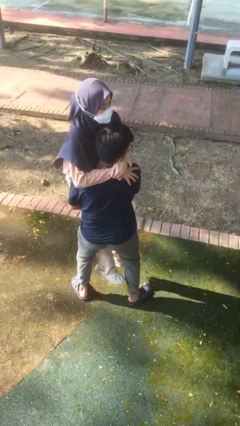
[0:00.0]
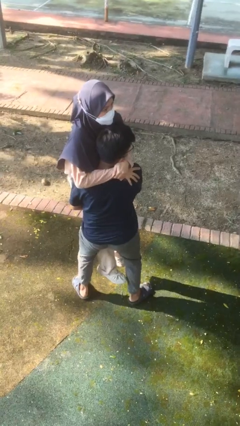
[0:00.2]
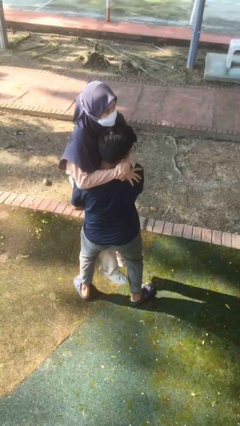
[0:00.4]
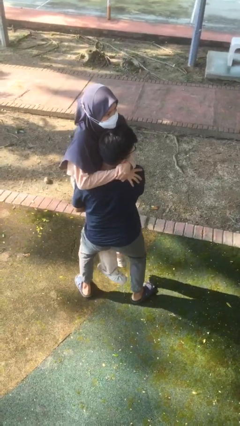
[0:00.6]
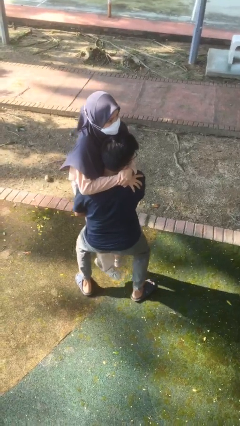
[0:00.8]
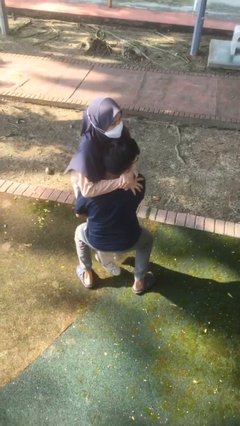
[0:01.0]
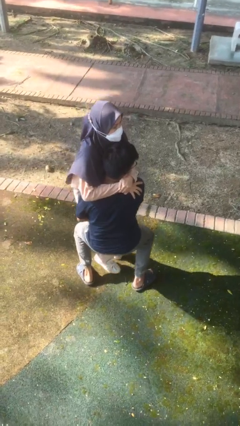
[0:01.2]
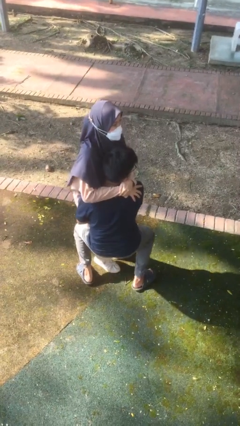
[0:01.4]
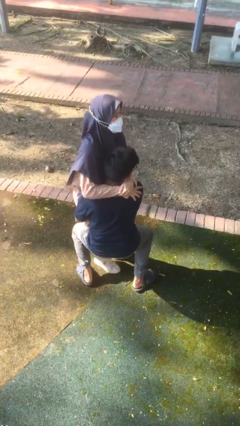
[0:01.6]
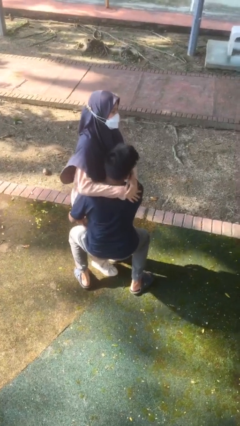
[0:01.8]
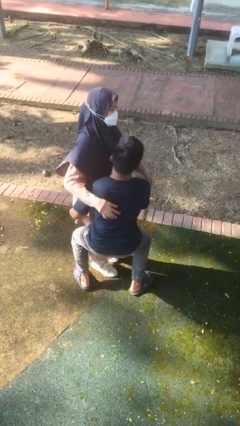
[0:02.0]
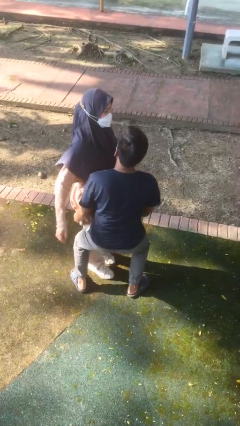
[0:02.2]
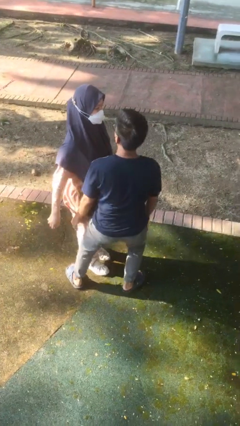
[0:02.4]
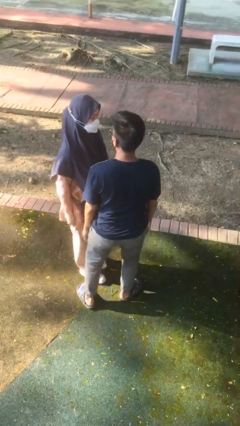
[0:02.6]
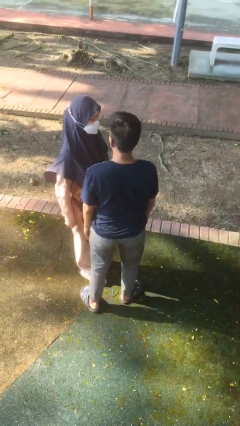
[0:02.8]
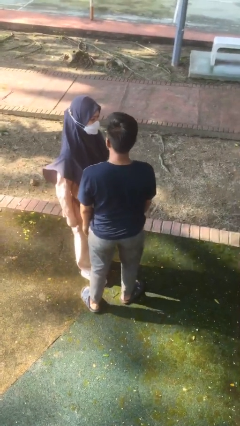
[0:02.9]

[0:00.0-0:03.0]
person puts down person

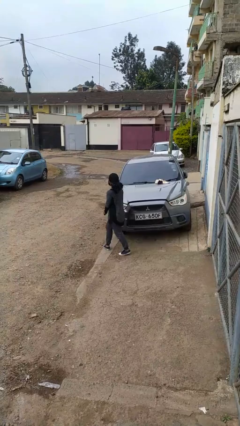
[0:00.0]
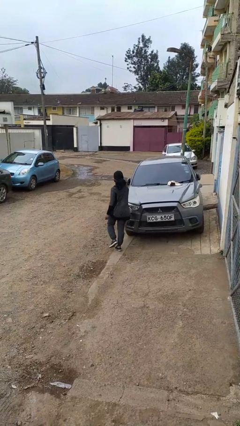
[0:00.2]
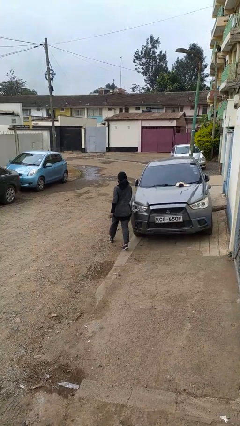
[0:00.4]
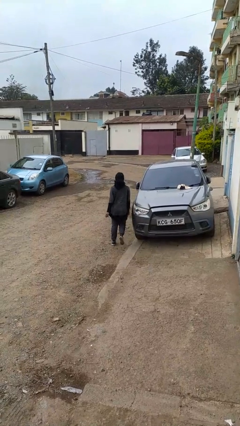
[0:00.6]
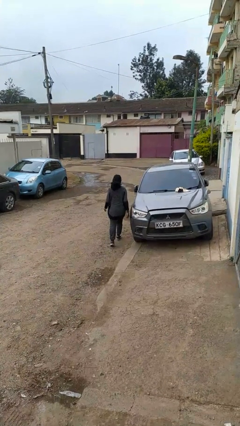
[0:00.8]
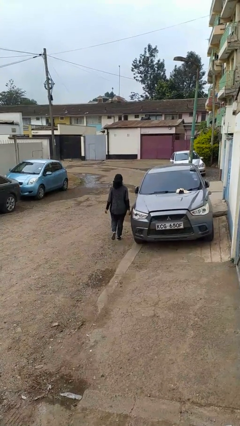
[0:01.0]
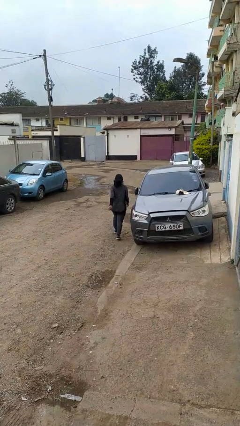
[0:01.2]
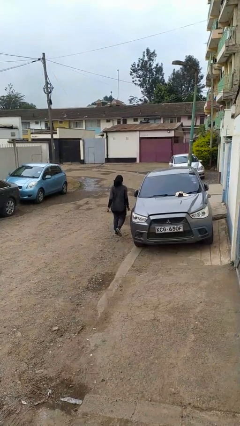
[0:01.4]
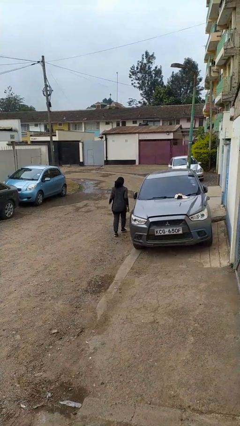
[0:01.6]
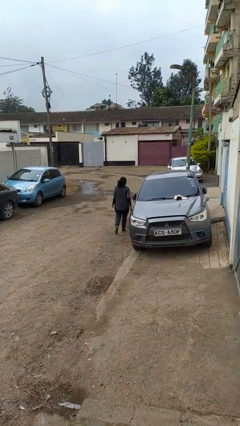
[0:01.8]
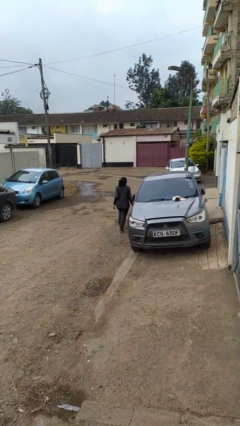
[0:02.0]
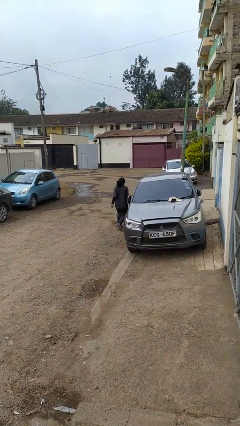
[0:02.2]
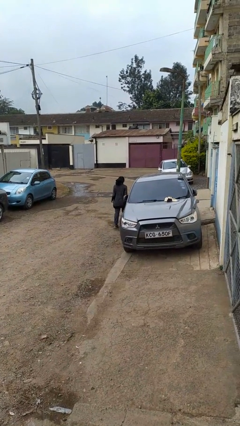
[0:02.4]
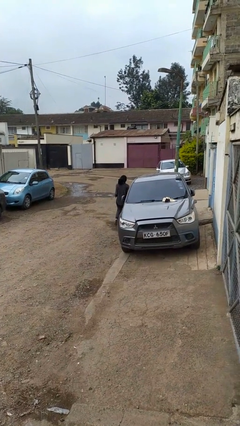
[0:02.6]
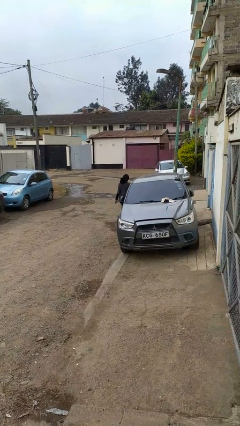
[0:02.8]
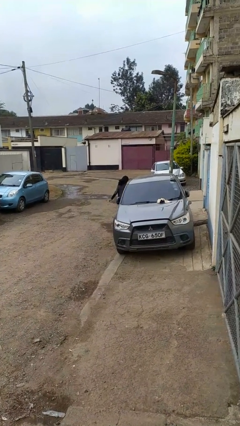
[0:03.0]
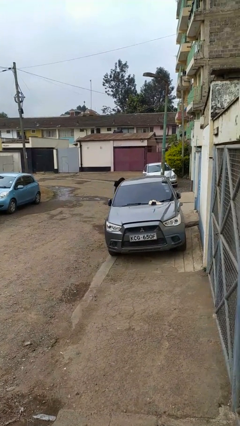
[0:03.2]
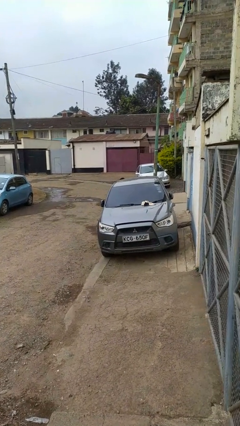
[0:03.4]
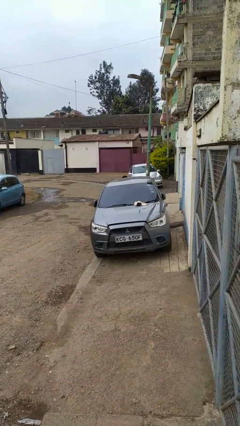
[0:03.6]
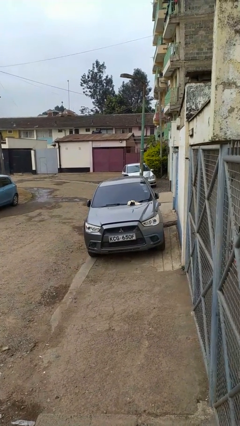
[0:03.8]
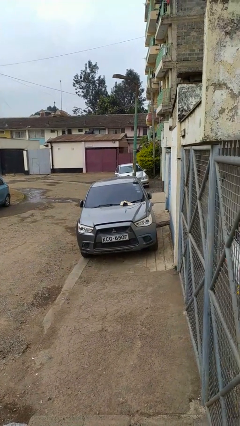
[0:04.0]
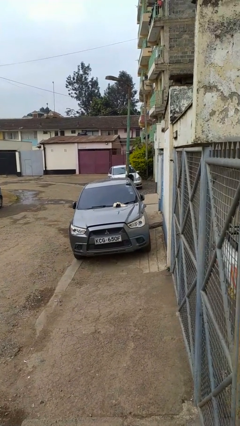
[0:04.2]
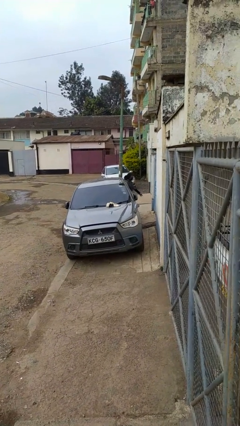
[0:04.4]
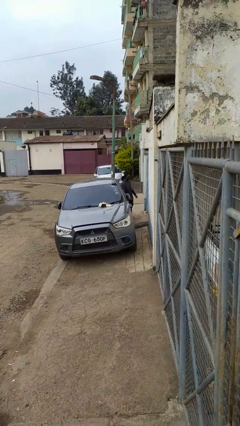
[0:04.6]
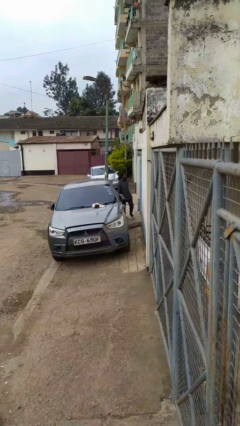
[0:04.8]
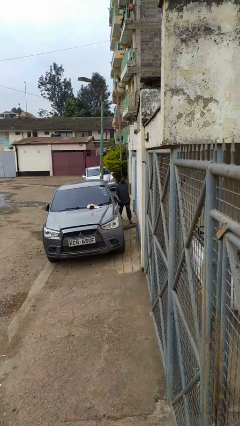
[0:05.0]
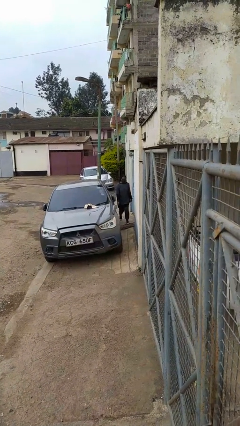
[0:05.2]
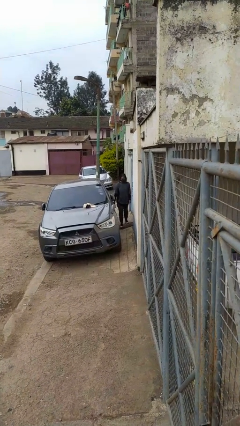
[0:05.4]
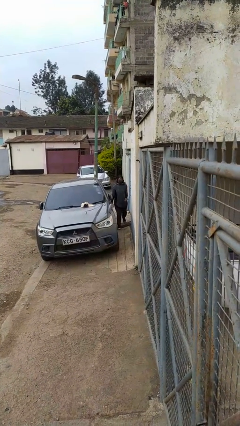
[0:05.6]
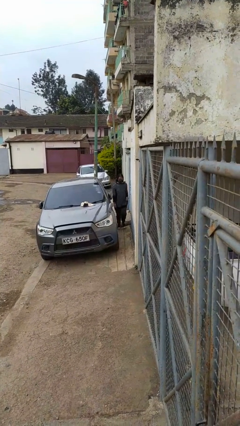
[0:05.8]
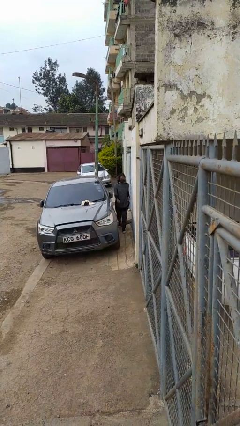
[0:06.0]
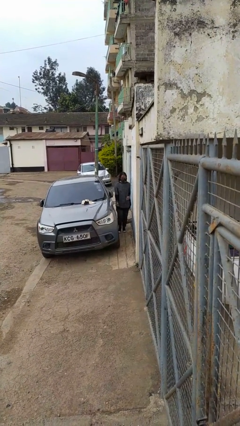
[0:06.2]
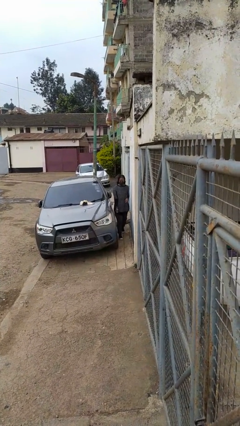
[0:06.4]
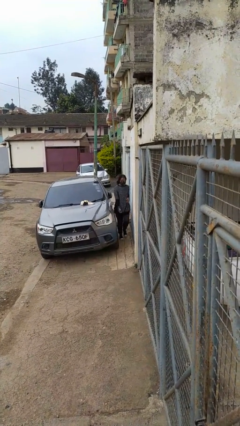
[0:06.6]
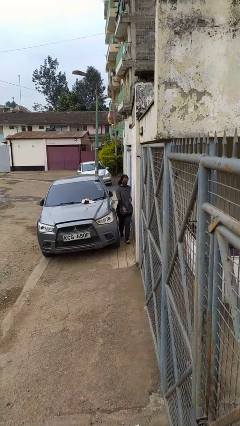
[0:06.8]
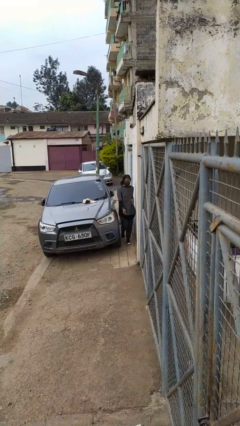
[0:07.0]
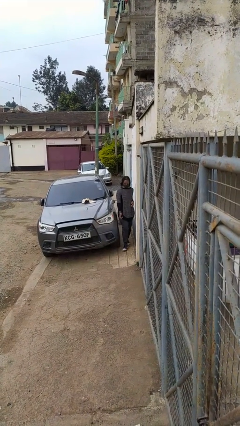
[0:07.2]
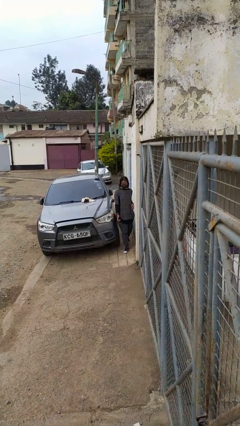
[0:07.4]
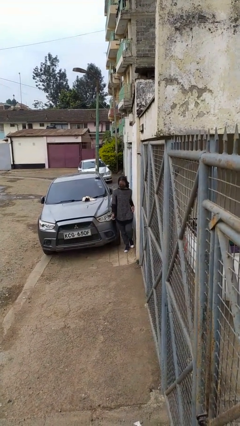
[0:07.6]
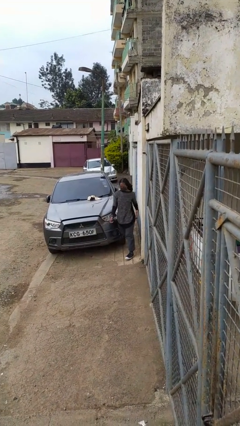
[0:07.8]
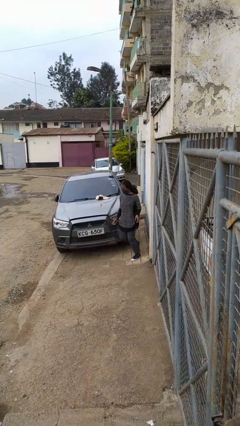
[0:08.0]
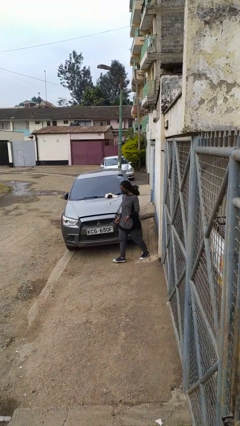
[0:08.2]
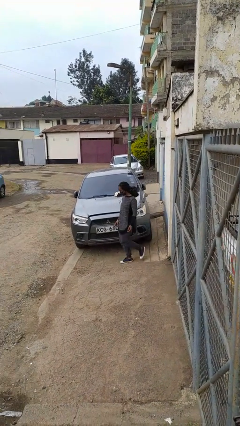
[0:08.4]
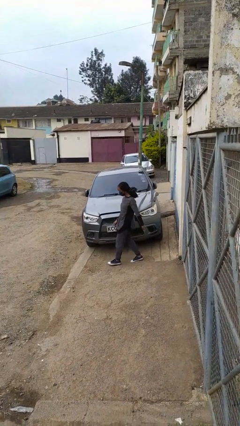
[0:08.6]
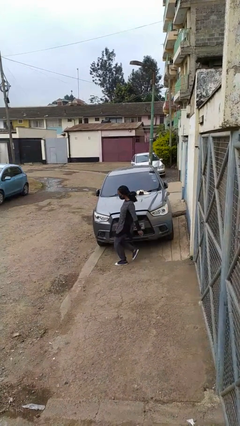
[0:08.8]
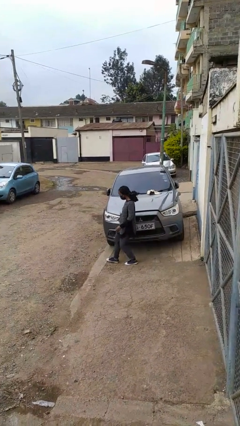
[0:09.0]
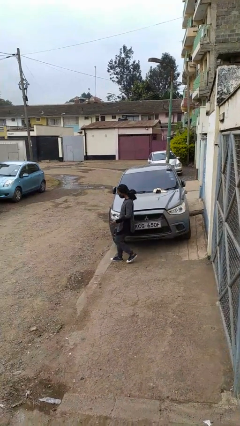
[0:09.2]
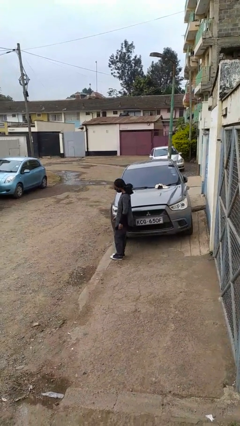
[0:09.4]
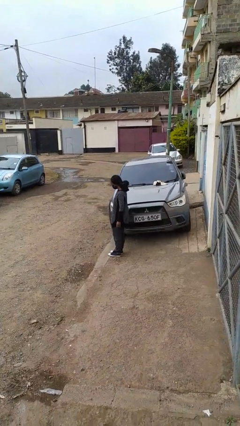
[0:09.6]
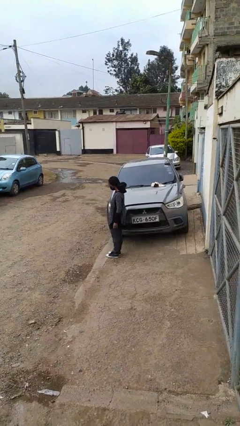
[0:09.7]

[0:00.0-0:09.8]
person walks around car

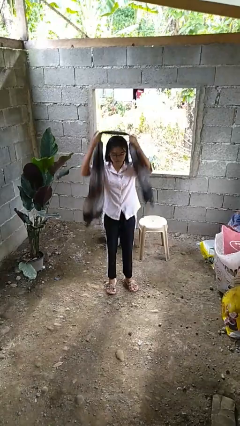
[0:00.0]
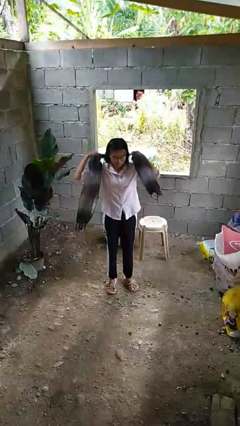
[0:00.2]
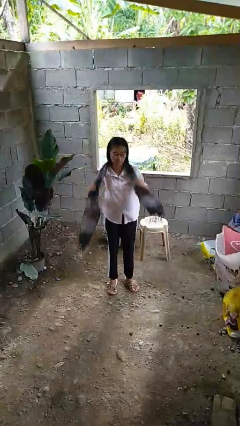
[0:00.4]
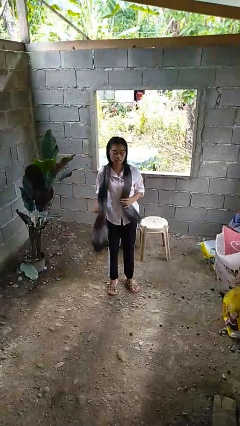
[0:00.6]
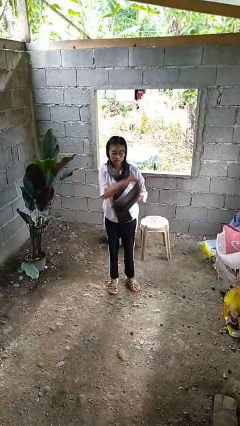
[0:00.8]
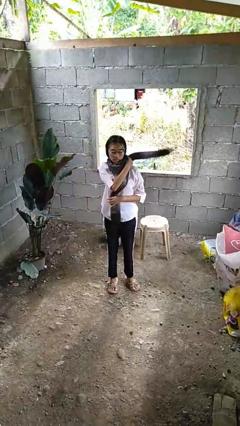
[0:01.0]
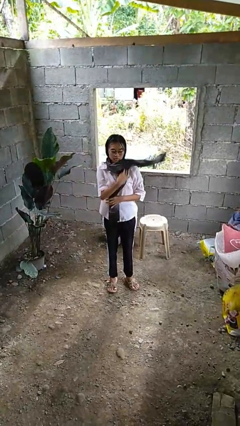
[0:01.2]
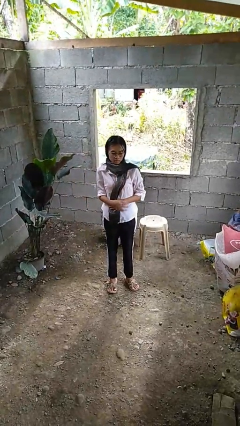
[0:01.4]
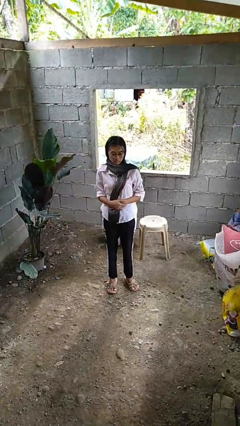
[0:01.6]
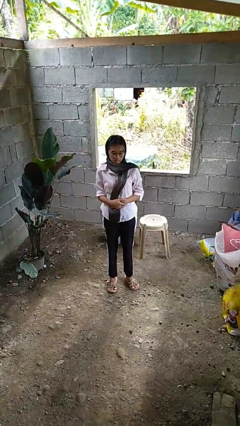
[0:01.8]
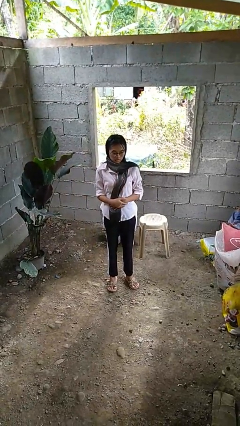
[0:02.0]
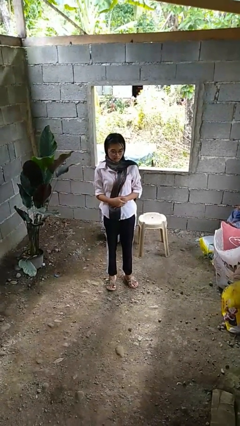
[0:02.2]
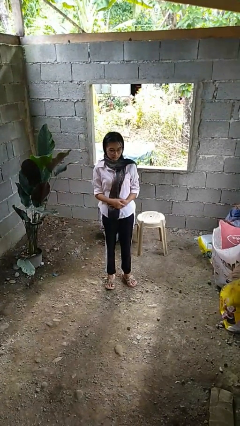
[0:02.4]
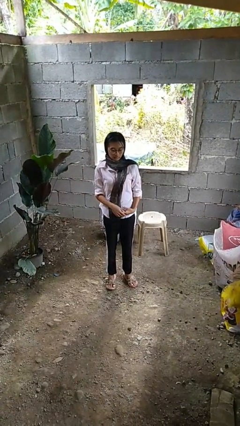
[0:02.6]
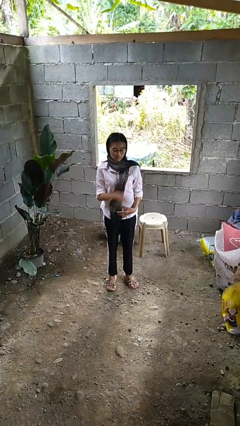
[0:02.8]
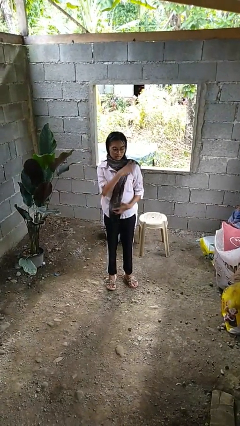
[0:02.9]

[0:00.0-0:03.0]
person puts on scarf

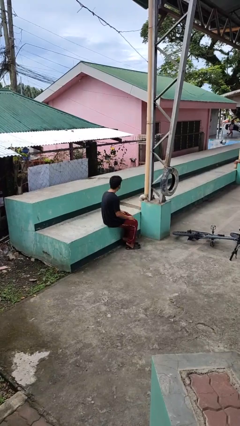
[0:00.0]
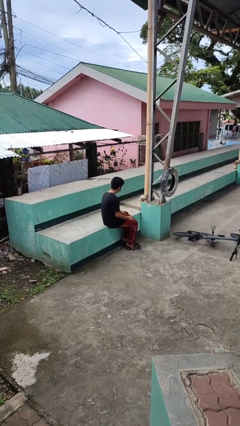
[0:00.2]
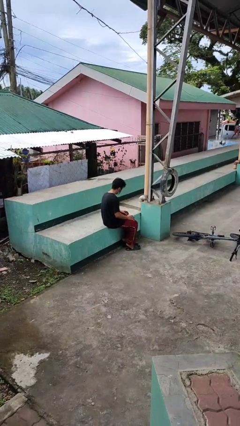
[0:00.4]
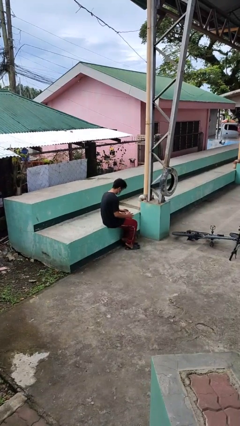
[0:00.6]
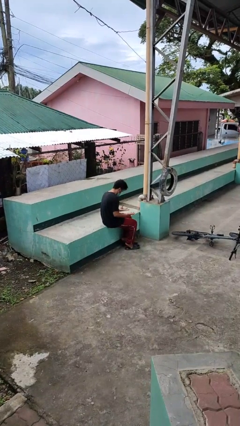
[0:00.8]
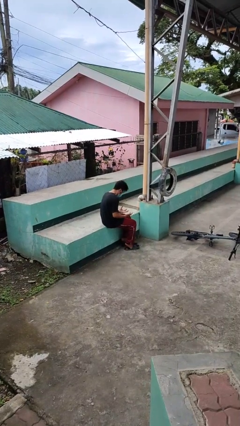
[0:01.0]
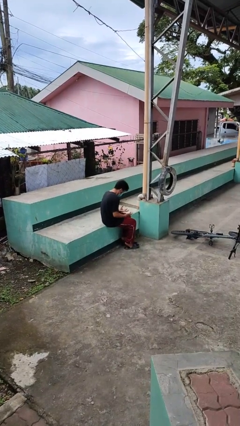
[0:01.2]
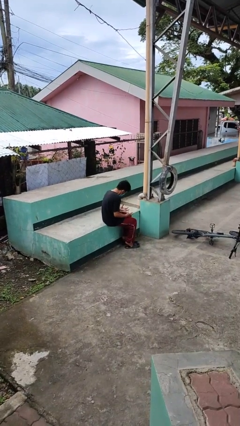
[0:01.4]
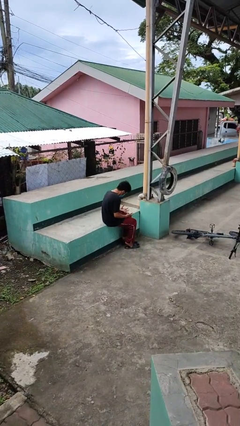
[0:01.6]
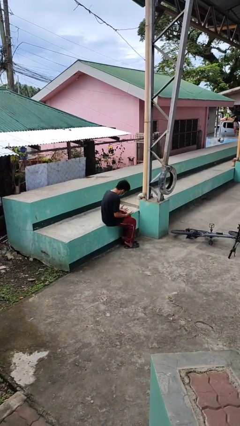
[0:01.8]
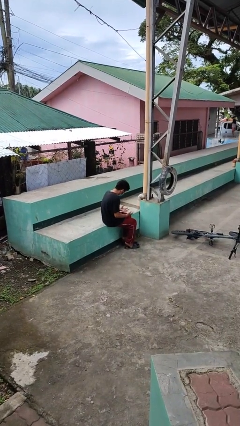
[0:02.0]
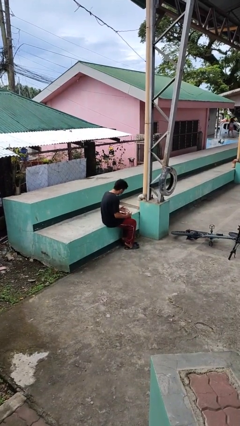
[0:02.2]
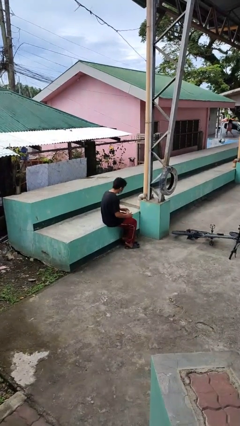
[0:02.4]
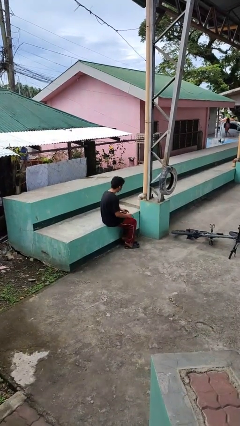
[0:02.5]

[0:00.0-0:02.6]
person looks at hands in lap
